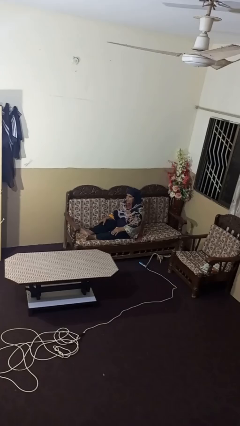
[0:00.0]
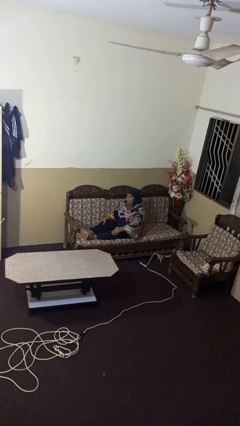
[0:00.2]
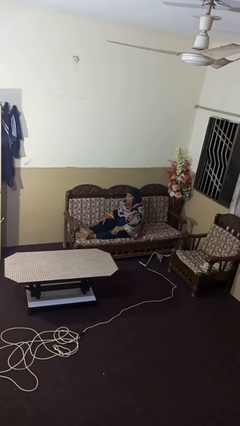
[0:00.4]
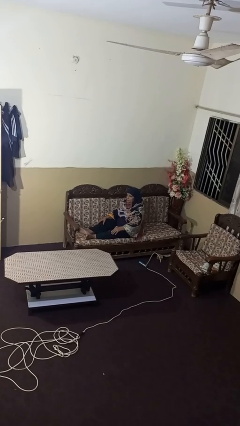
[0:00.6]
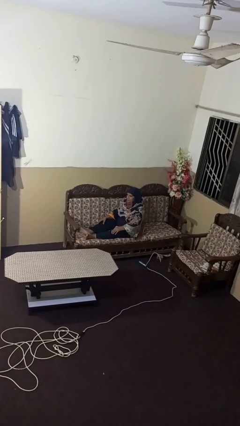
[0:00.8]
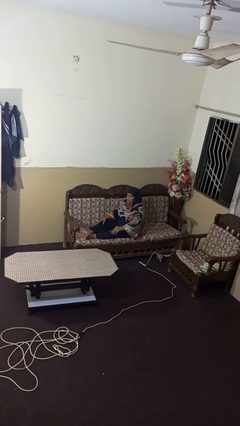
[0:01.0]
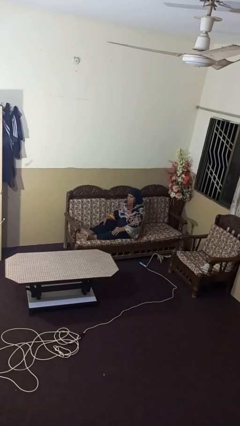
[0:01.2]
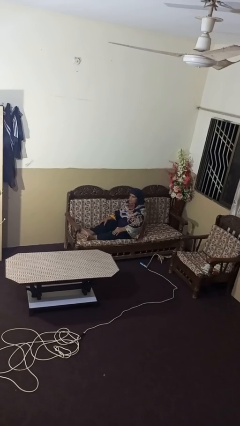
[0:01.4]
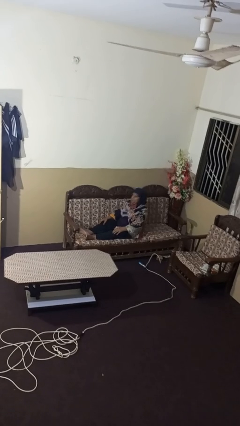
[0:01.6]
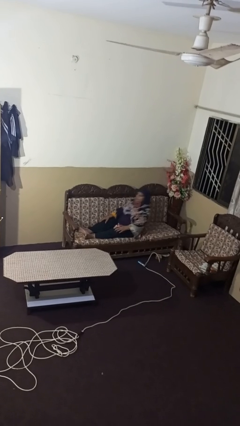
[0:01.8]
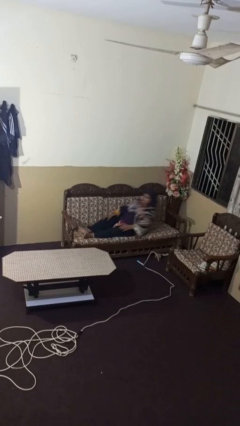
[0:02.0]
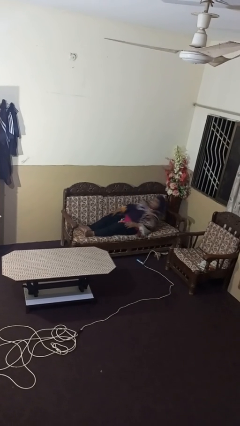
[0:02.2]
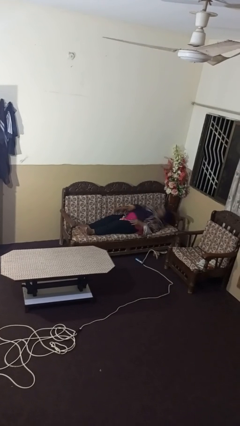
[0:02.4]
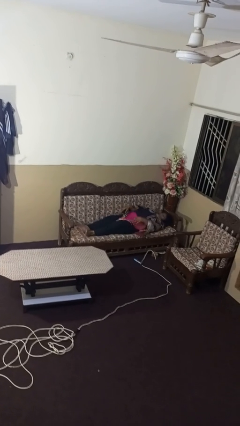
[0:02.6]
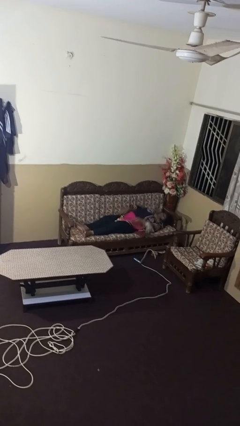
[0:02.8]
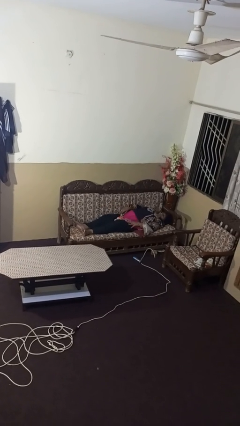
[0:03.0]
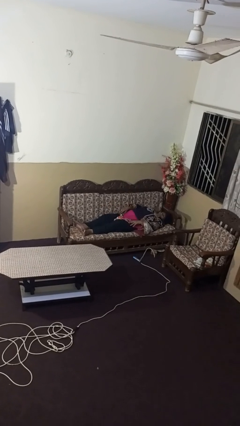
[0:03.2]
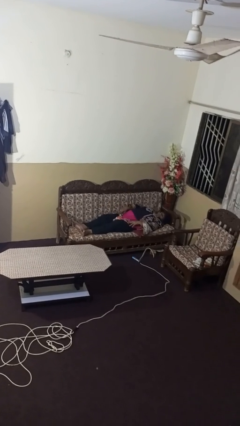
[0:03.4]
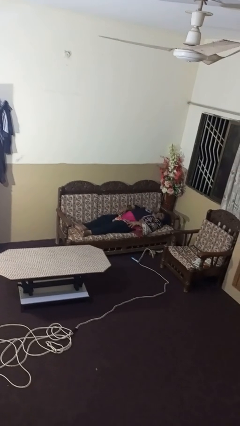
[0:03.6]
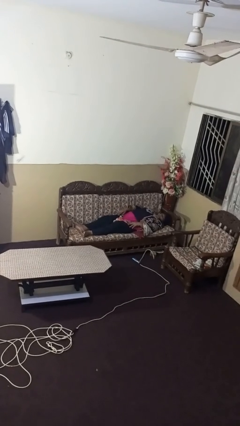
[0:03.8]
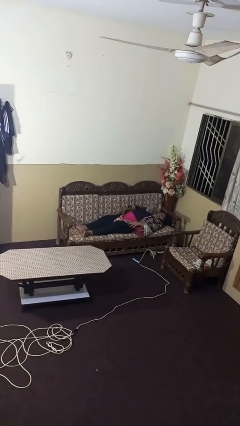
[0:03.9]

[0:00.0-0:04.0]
person lies down on couch

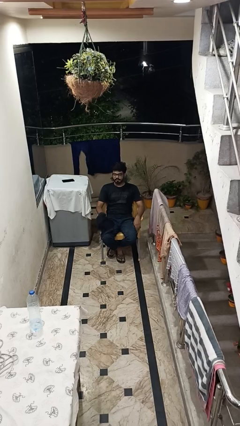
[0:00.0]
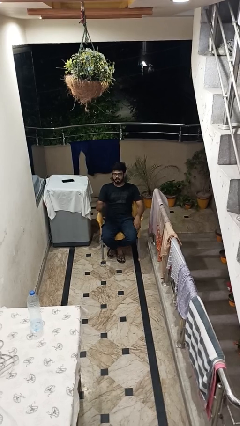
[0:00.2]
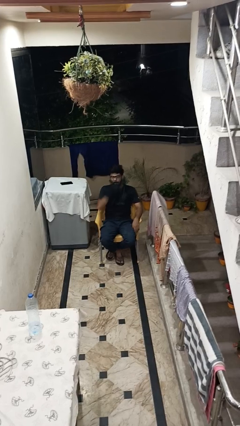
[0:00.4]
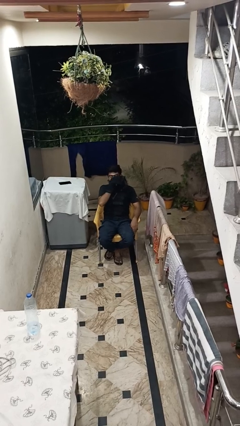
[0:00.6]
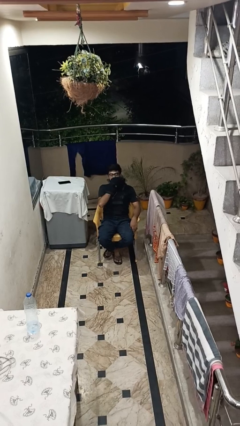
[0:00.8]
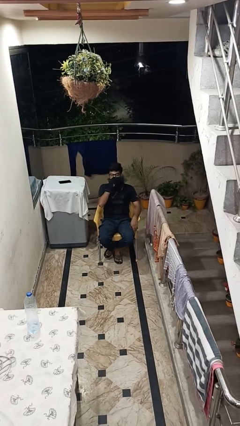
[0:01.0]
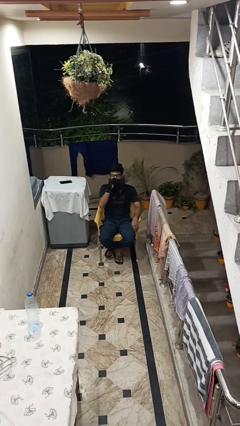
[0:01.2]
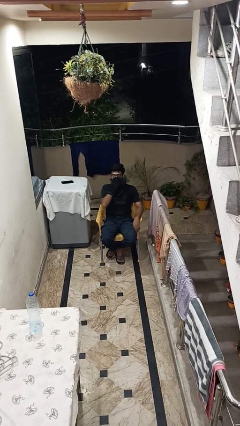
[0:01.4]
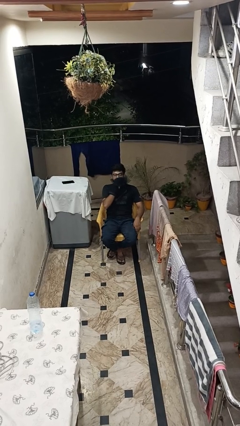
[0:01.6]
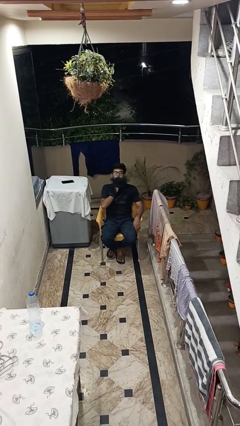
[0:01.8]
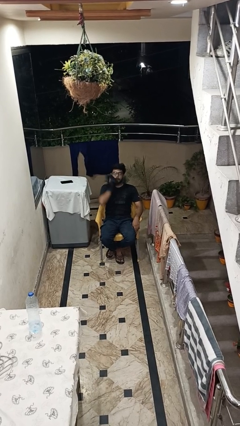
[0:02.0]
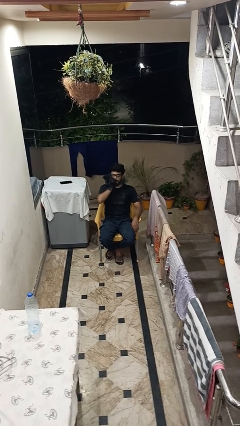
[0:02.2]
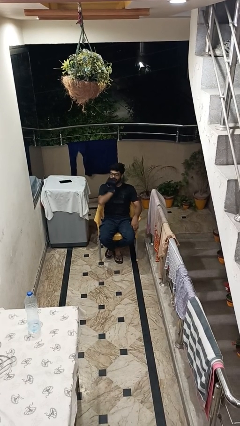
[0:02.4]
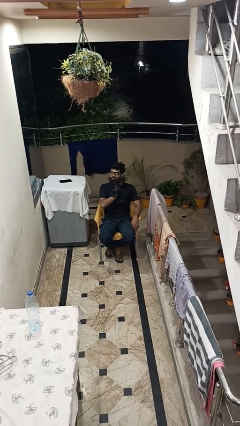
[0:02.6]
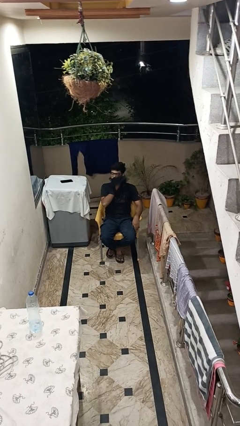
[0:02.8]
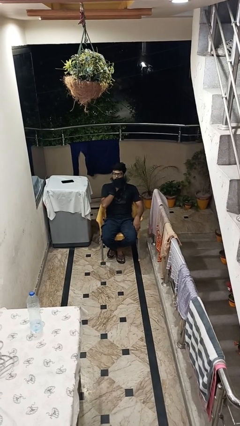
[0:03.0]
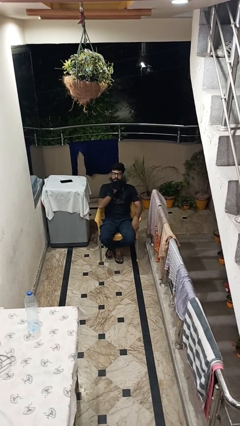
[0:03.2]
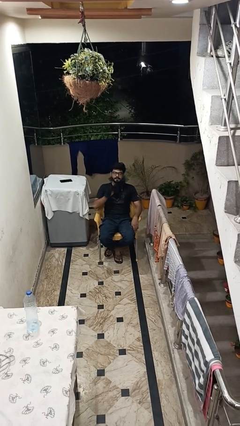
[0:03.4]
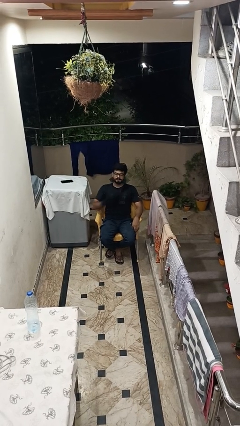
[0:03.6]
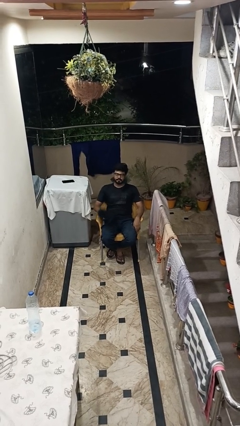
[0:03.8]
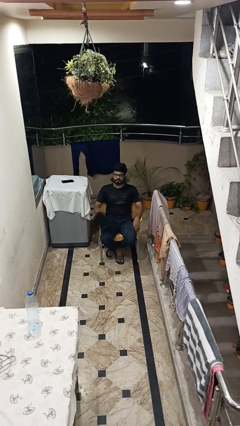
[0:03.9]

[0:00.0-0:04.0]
person wipes mouth with napkin

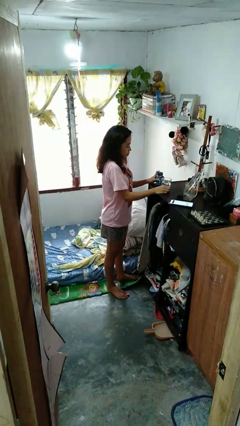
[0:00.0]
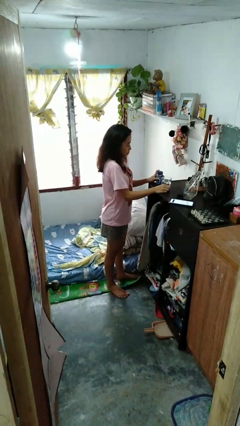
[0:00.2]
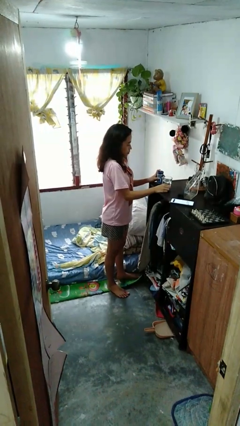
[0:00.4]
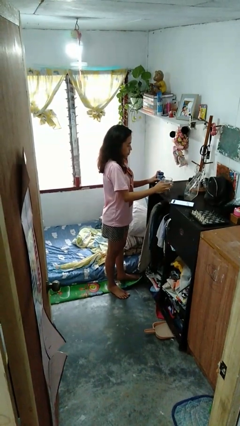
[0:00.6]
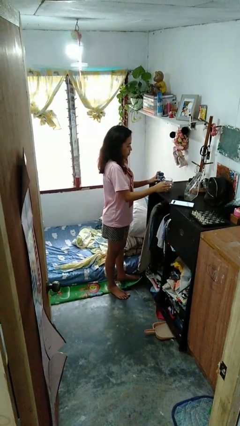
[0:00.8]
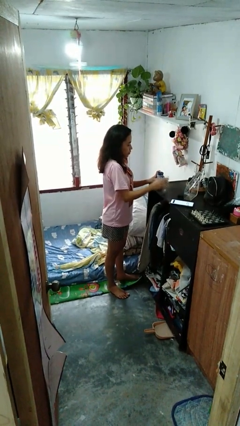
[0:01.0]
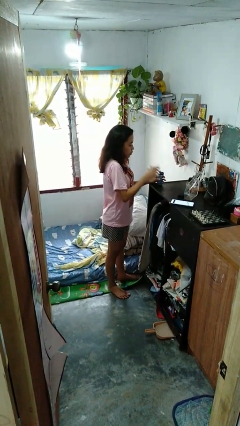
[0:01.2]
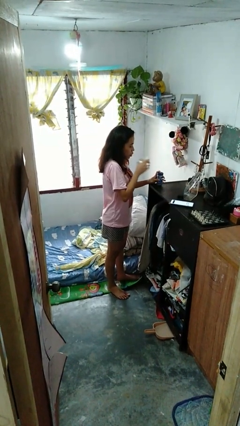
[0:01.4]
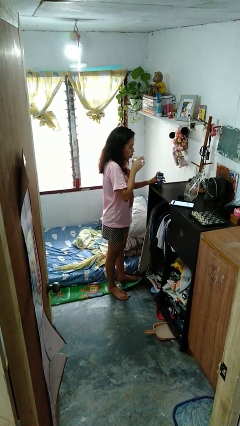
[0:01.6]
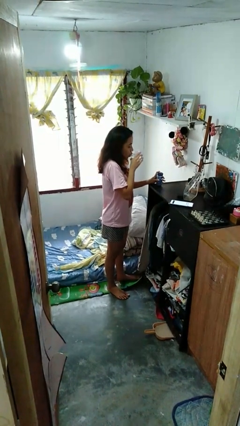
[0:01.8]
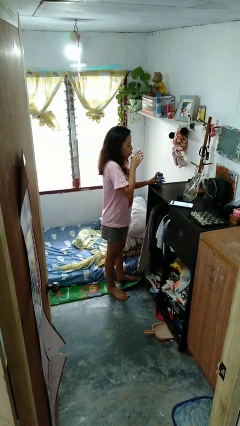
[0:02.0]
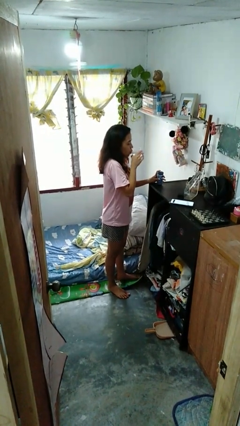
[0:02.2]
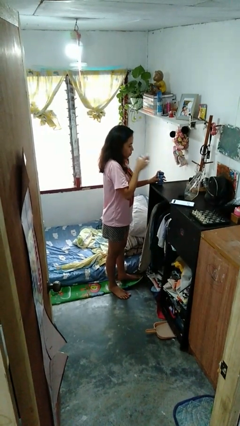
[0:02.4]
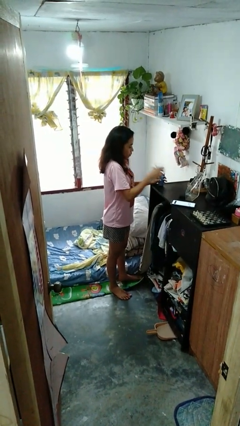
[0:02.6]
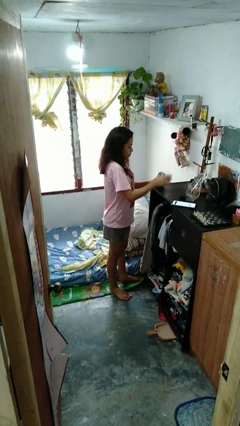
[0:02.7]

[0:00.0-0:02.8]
person drinks from cup

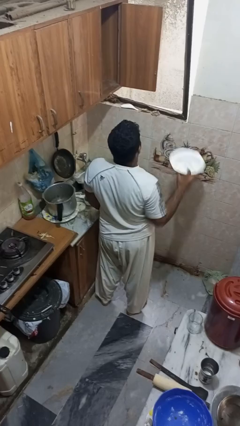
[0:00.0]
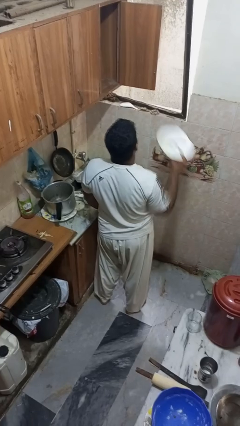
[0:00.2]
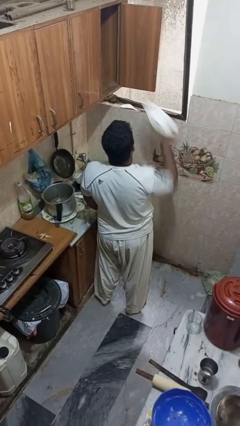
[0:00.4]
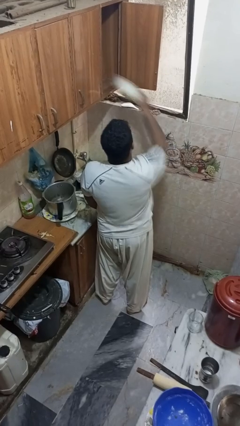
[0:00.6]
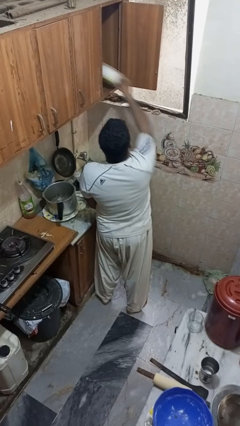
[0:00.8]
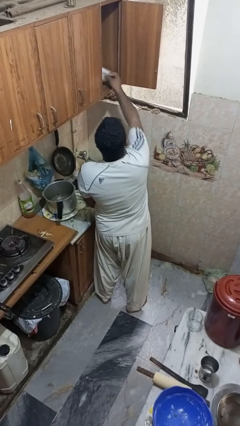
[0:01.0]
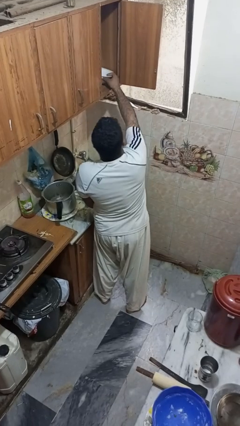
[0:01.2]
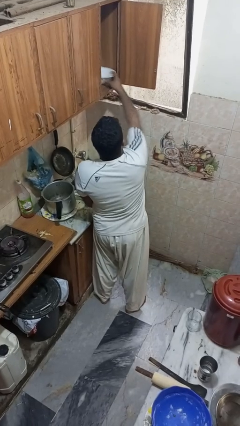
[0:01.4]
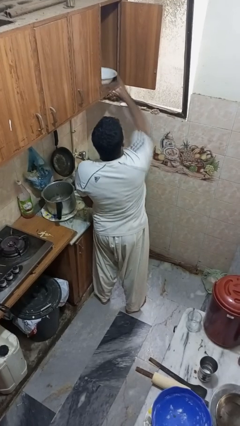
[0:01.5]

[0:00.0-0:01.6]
person puts object in cabinet

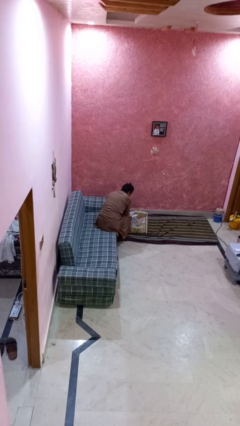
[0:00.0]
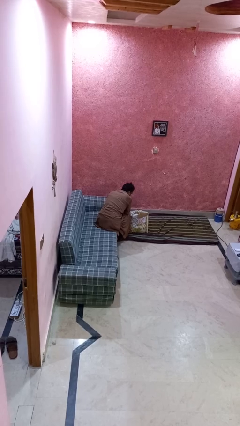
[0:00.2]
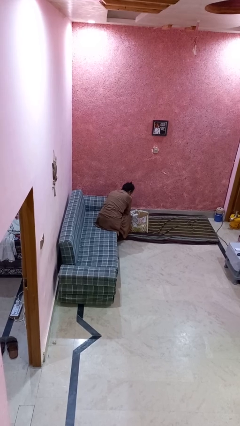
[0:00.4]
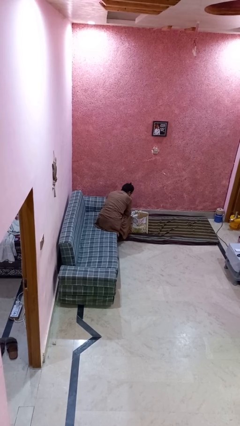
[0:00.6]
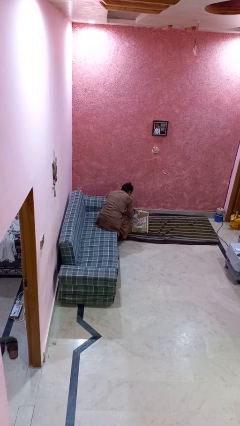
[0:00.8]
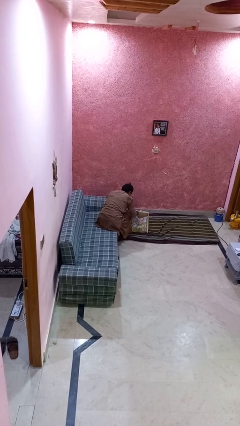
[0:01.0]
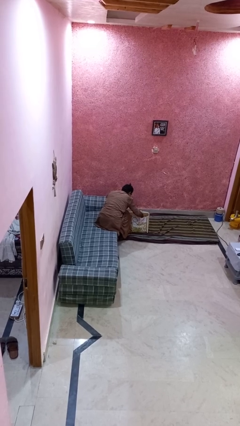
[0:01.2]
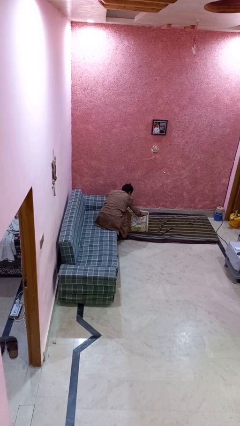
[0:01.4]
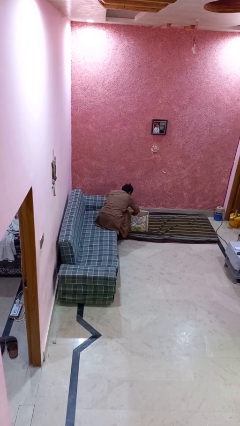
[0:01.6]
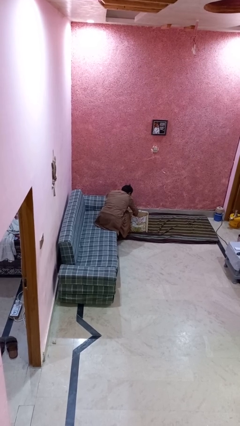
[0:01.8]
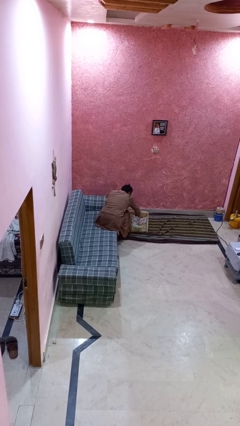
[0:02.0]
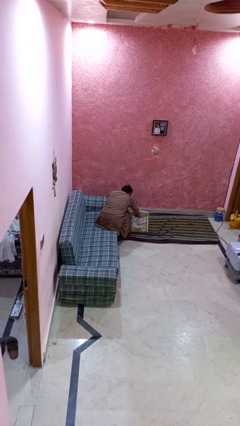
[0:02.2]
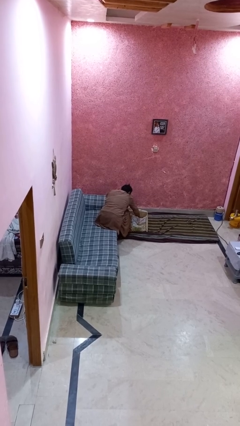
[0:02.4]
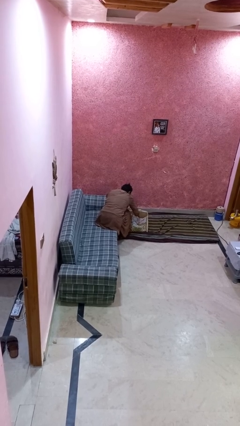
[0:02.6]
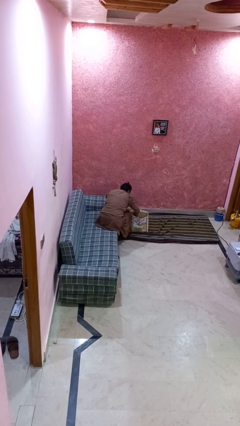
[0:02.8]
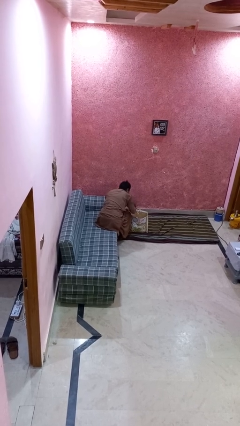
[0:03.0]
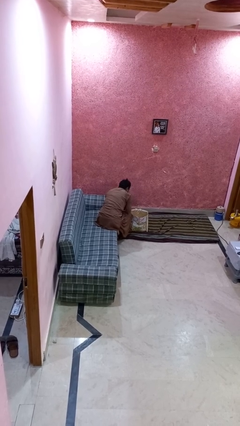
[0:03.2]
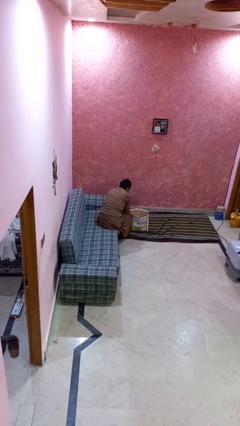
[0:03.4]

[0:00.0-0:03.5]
person searches in bag

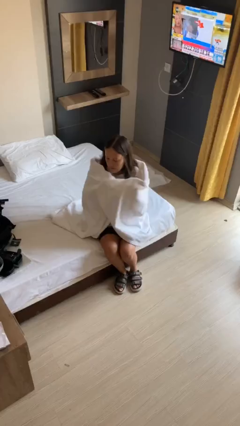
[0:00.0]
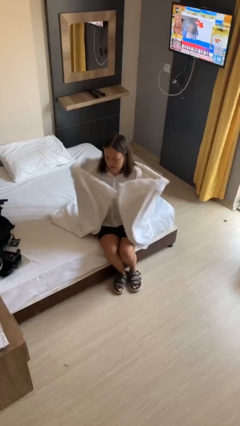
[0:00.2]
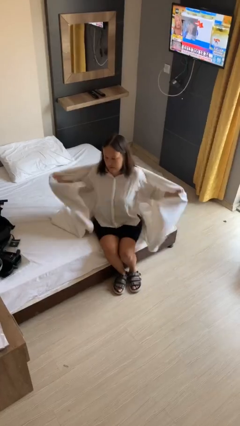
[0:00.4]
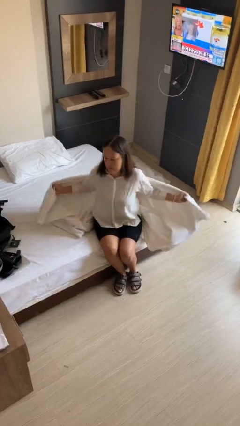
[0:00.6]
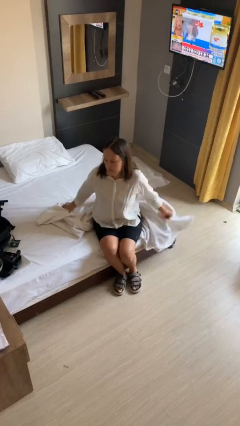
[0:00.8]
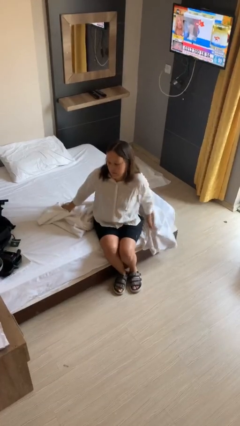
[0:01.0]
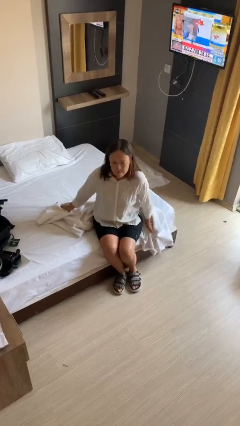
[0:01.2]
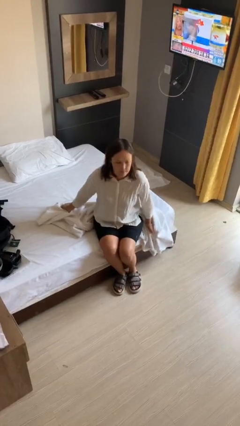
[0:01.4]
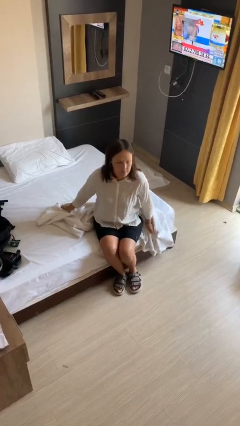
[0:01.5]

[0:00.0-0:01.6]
person uncovers with blanket
